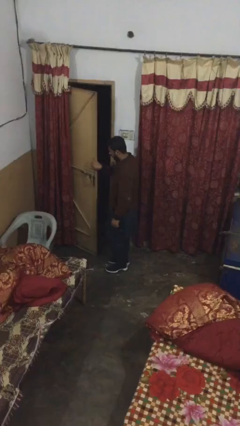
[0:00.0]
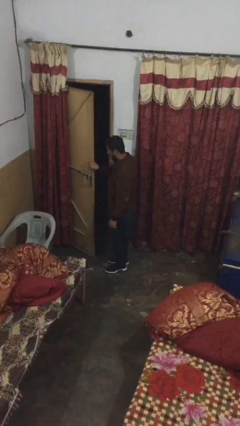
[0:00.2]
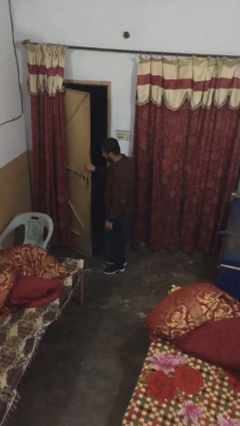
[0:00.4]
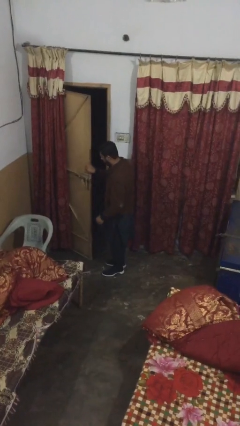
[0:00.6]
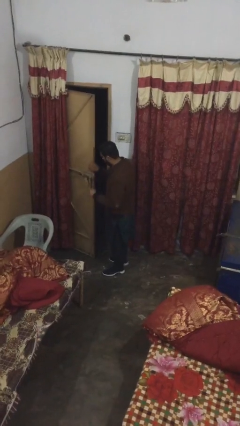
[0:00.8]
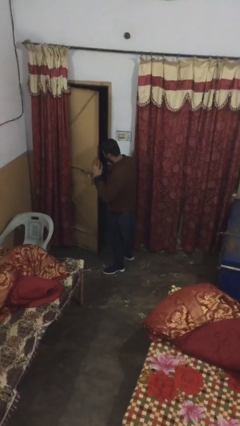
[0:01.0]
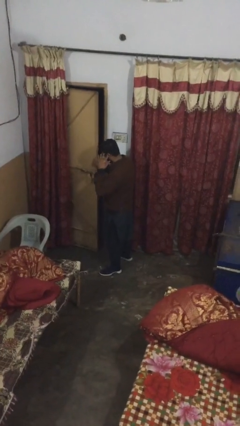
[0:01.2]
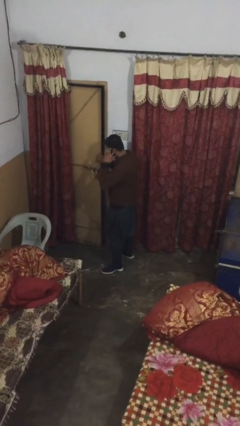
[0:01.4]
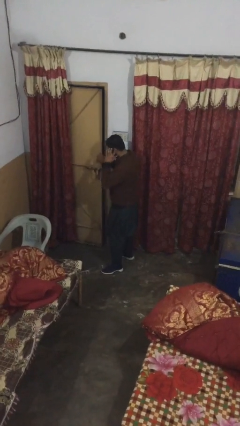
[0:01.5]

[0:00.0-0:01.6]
person closes facility door

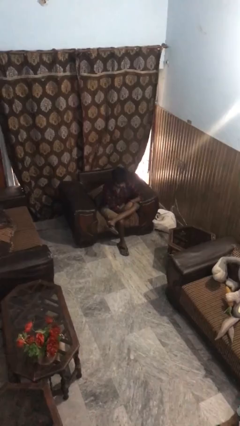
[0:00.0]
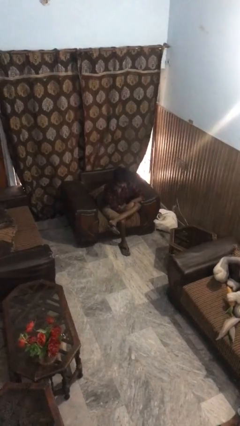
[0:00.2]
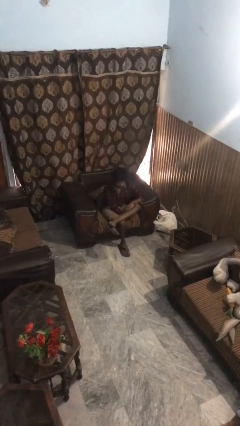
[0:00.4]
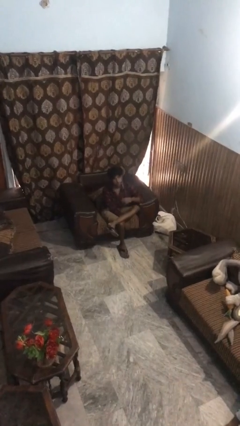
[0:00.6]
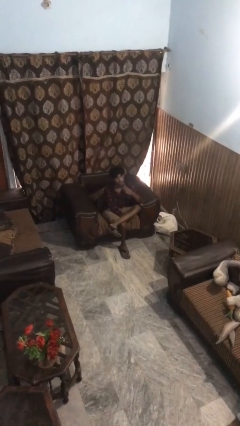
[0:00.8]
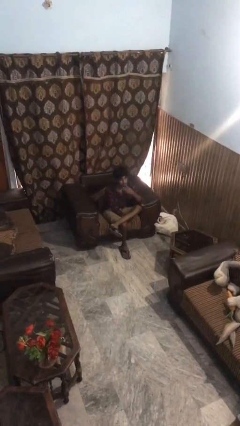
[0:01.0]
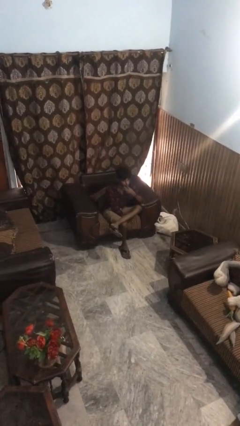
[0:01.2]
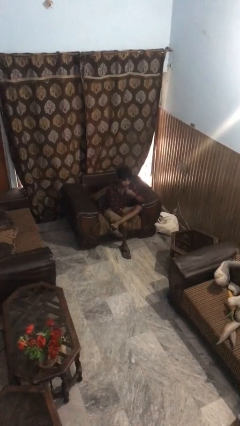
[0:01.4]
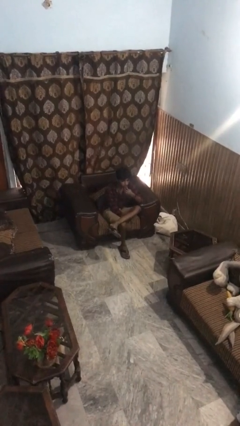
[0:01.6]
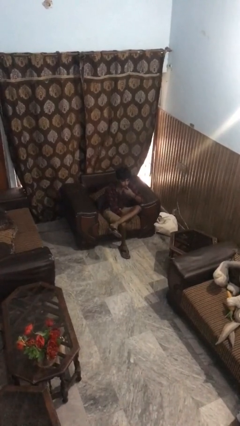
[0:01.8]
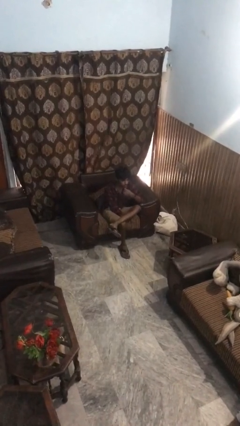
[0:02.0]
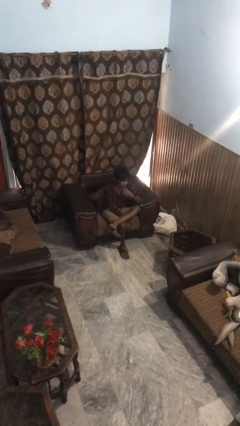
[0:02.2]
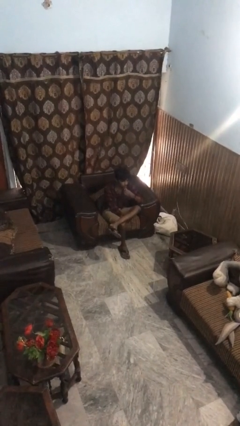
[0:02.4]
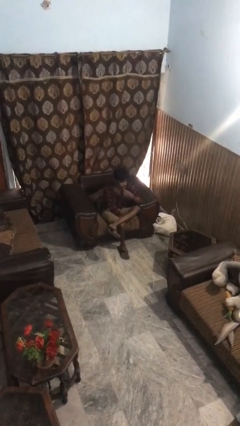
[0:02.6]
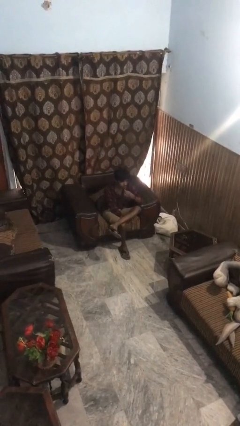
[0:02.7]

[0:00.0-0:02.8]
person strokes chin

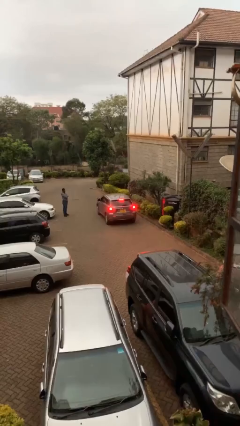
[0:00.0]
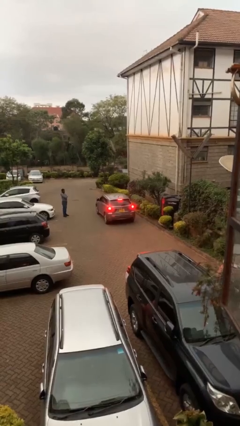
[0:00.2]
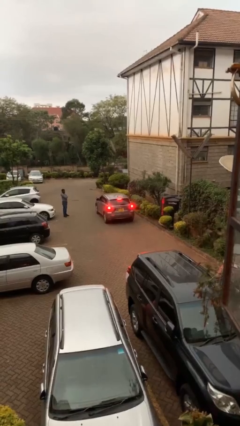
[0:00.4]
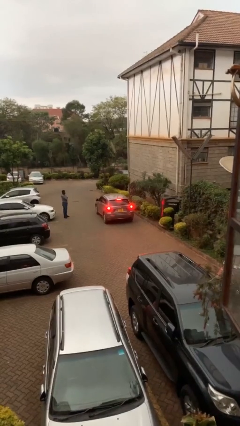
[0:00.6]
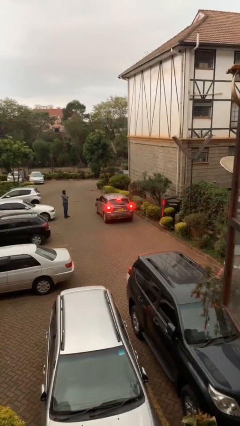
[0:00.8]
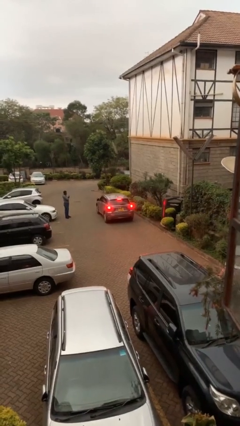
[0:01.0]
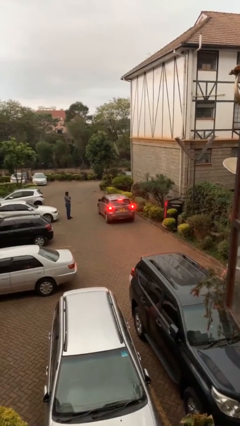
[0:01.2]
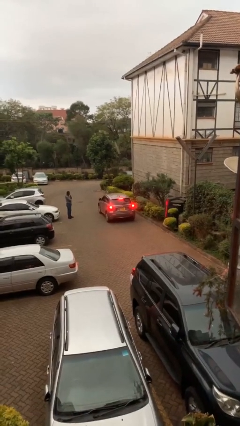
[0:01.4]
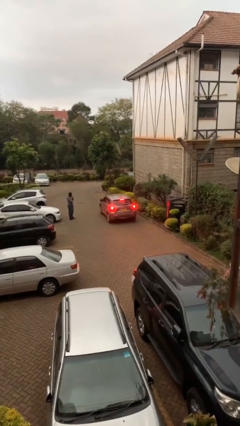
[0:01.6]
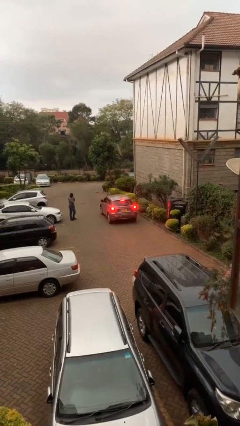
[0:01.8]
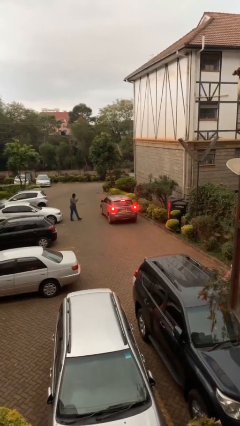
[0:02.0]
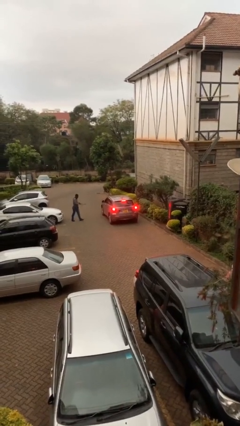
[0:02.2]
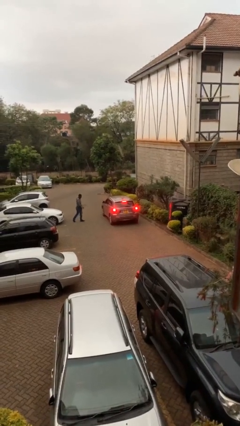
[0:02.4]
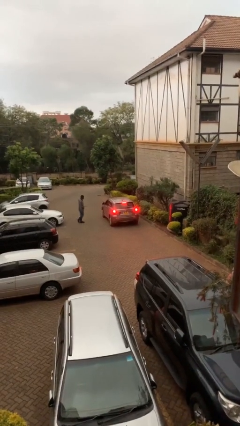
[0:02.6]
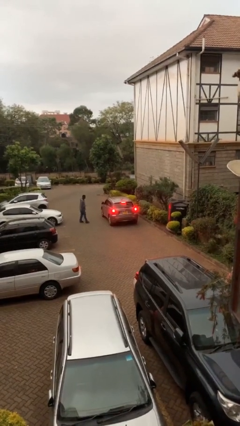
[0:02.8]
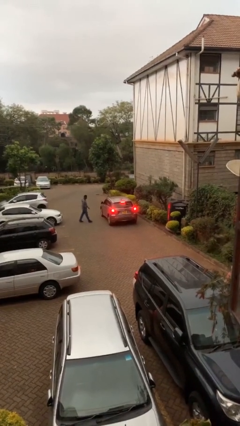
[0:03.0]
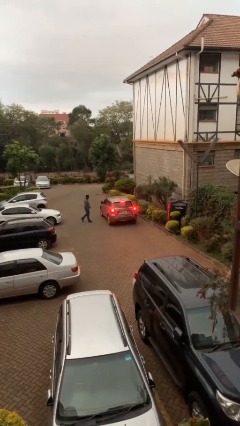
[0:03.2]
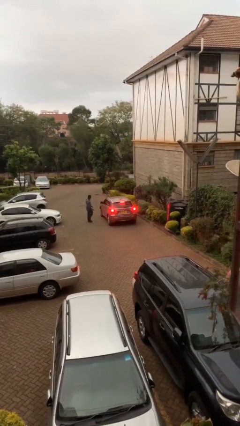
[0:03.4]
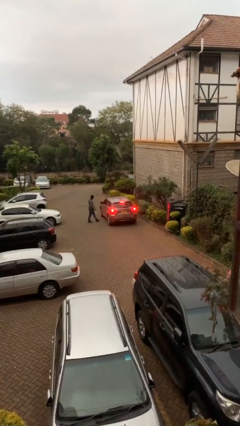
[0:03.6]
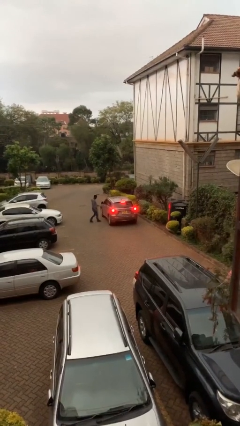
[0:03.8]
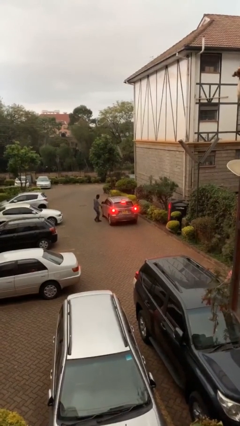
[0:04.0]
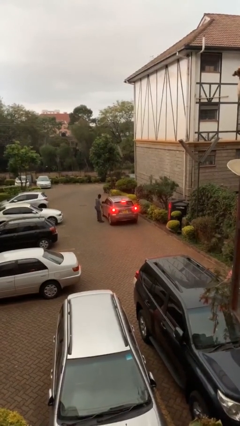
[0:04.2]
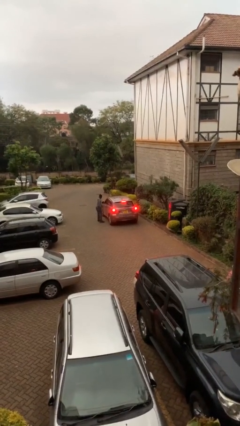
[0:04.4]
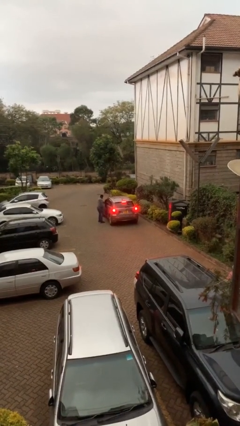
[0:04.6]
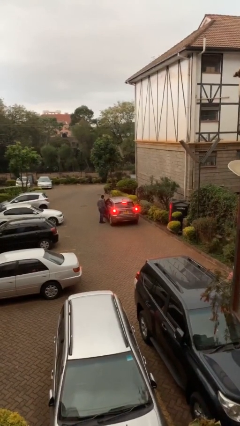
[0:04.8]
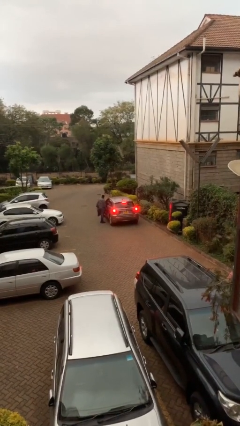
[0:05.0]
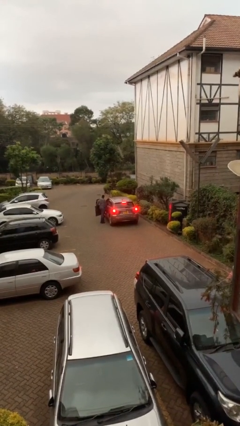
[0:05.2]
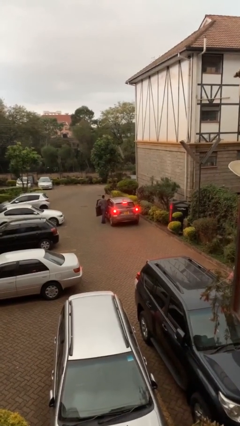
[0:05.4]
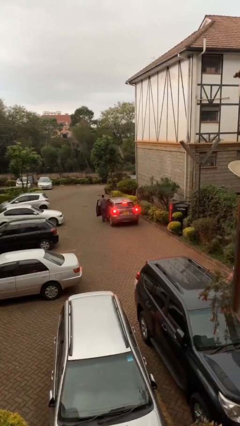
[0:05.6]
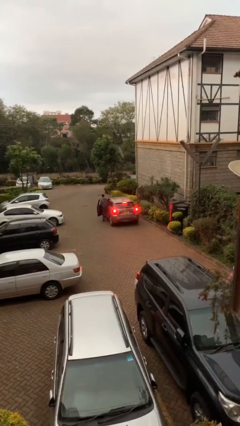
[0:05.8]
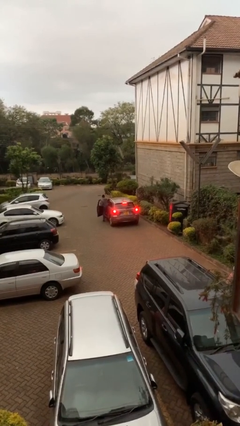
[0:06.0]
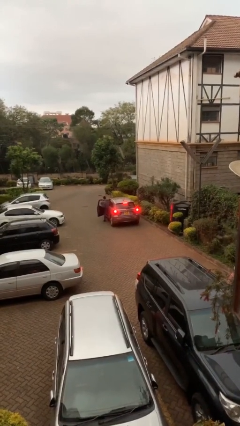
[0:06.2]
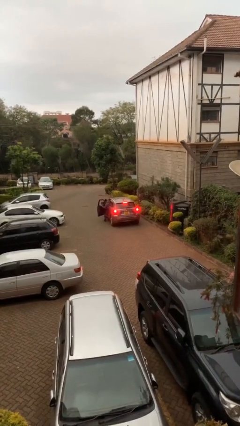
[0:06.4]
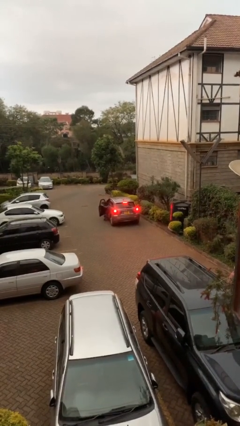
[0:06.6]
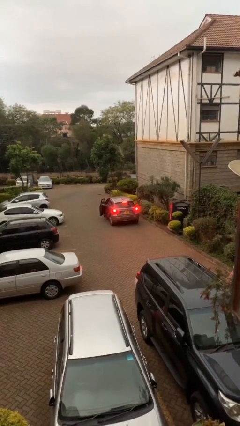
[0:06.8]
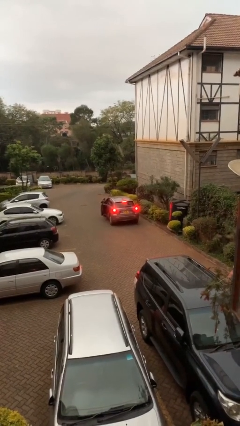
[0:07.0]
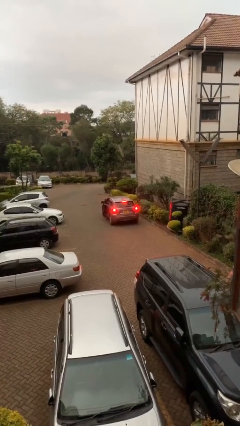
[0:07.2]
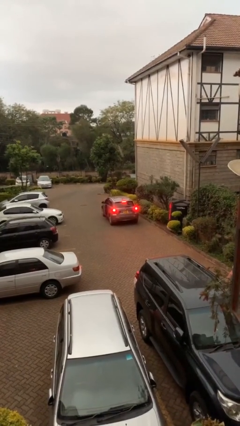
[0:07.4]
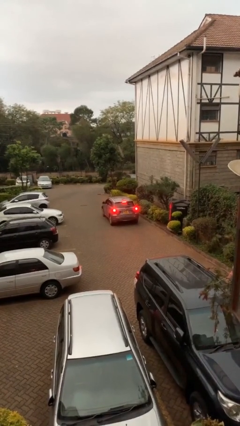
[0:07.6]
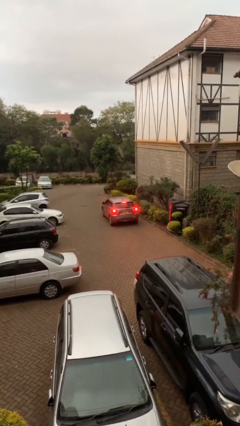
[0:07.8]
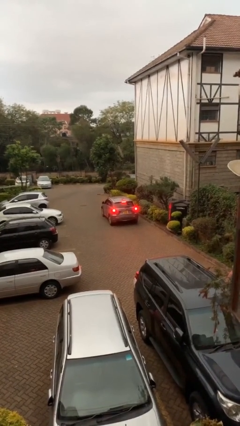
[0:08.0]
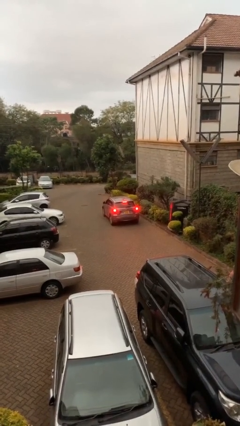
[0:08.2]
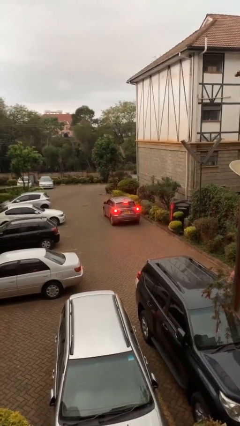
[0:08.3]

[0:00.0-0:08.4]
car picks up person

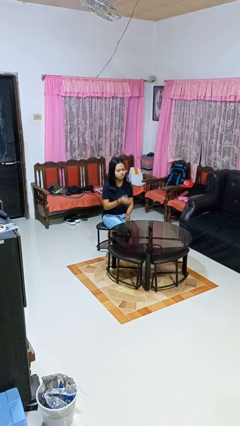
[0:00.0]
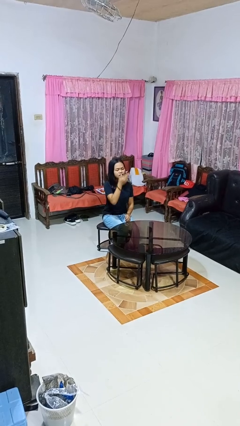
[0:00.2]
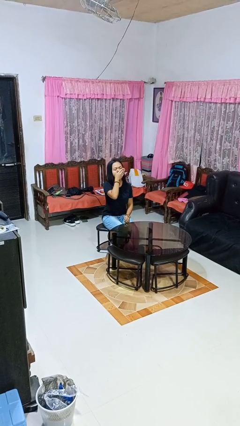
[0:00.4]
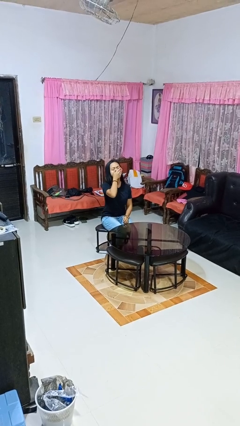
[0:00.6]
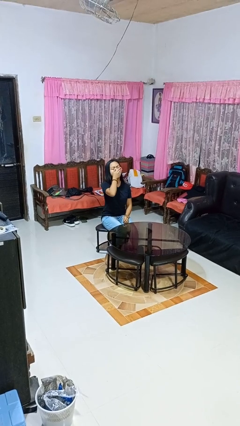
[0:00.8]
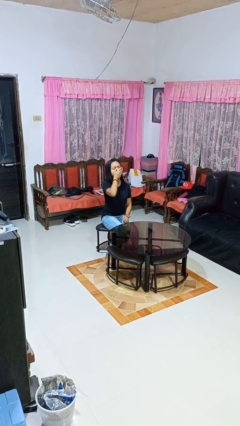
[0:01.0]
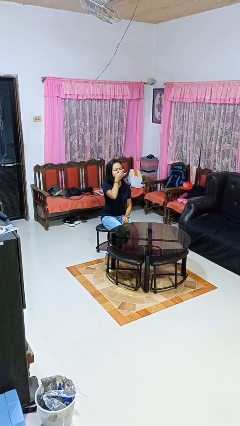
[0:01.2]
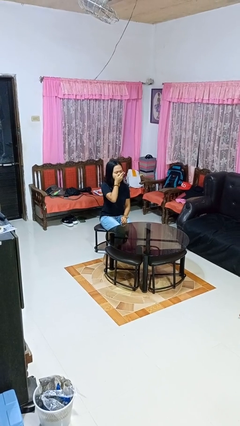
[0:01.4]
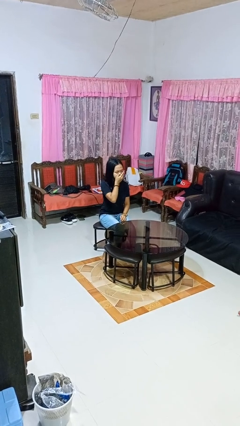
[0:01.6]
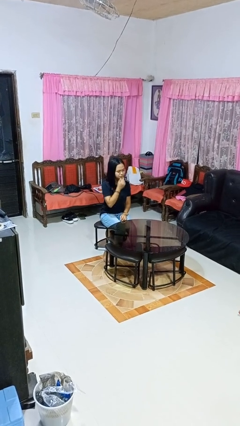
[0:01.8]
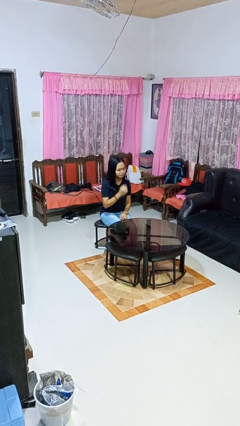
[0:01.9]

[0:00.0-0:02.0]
person yawns

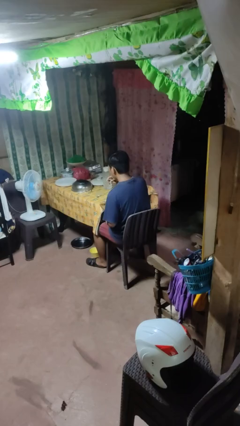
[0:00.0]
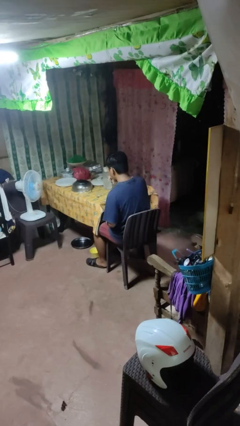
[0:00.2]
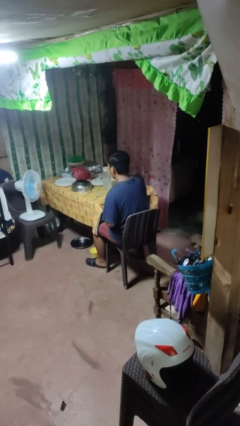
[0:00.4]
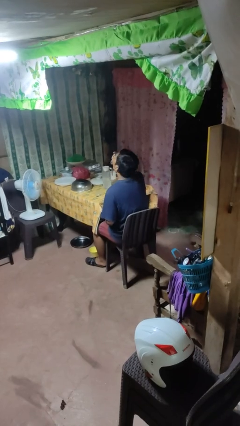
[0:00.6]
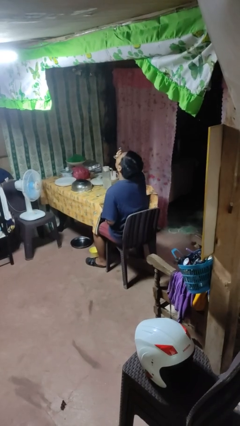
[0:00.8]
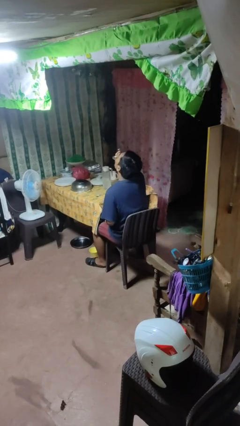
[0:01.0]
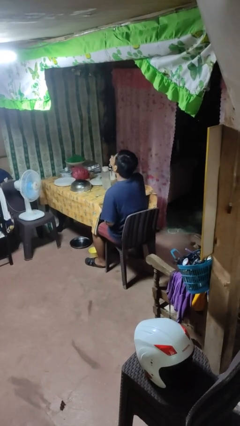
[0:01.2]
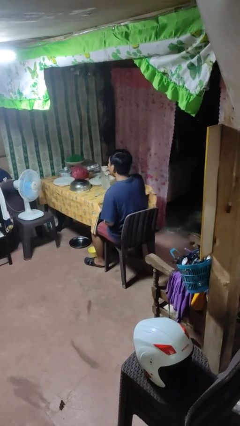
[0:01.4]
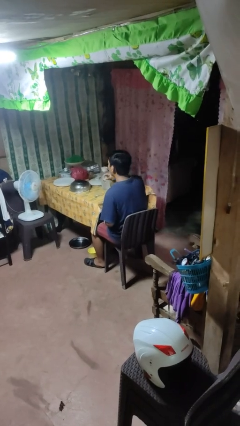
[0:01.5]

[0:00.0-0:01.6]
person drinks from shotglass

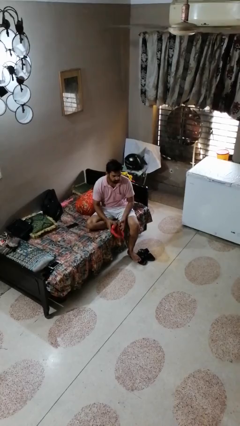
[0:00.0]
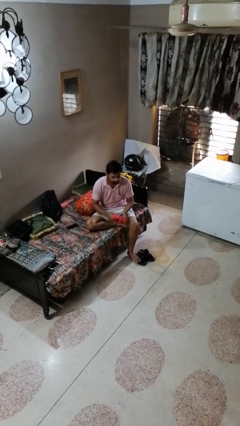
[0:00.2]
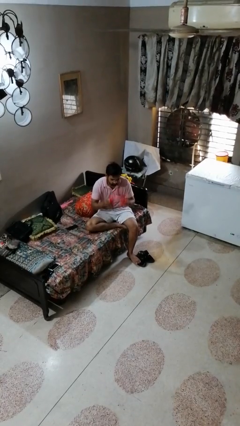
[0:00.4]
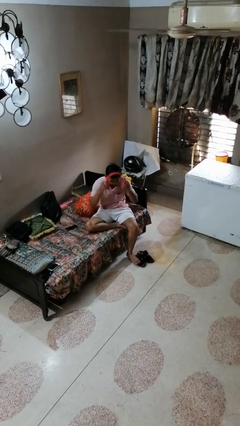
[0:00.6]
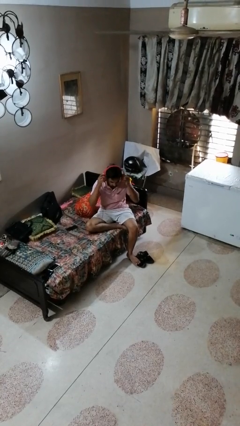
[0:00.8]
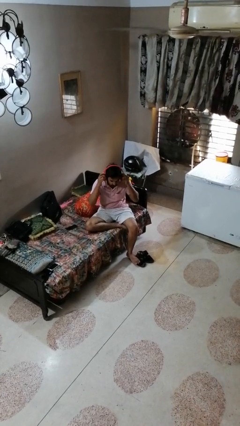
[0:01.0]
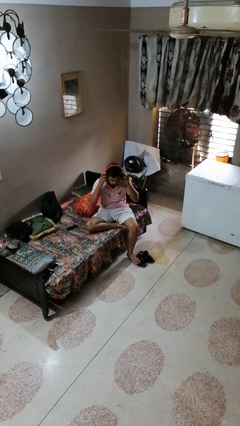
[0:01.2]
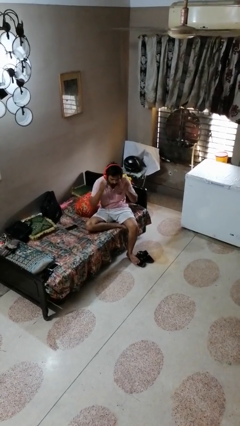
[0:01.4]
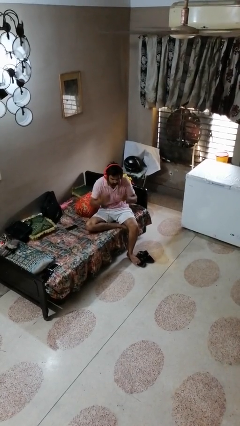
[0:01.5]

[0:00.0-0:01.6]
person puts on headphones
